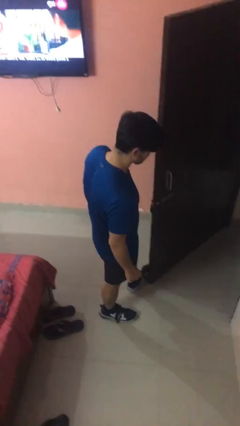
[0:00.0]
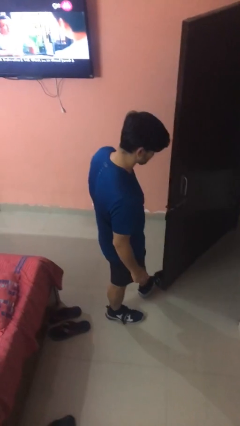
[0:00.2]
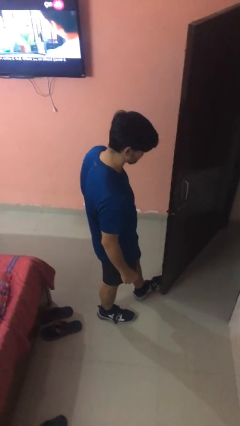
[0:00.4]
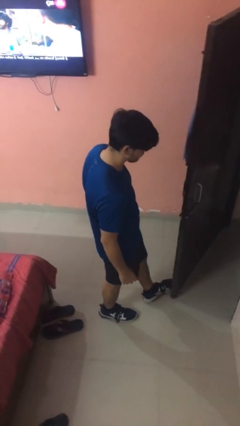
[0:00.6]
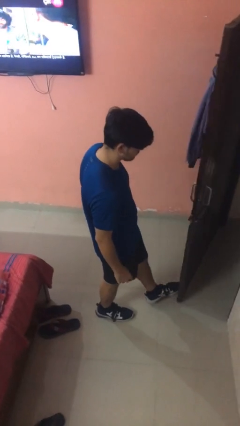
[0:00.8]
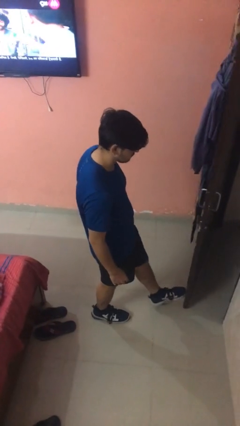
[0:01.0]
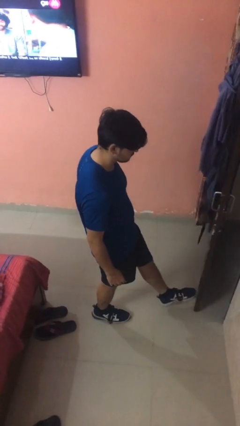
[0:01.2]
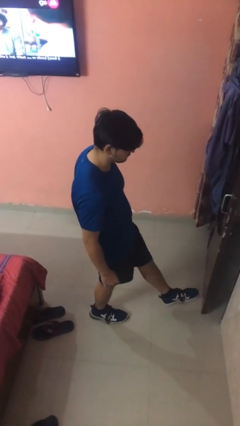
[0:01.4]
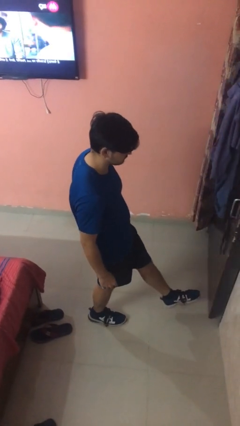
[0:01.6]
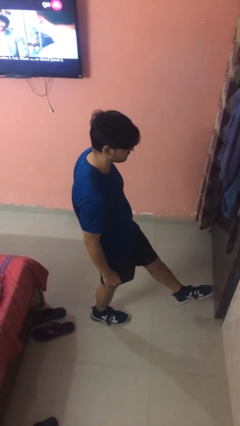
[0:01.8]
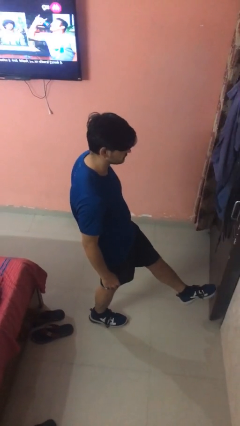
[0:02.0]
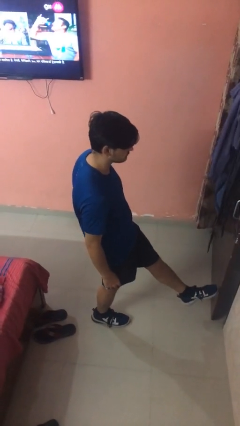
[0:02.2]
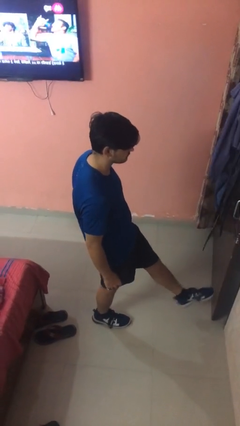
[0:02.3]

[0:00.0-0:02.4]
person closes door with foot

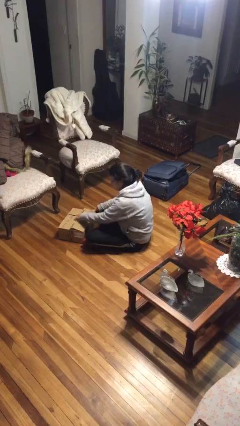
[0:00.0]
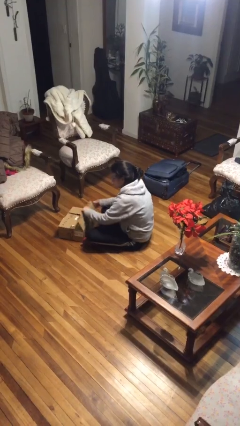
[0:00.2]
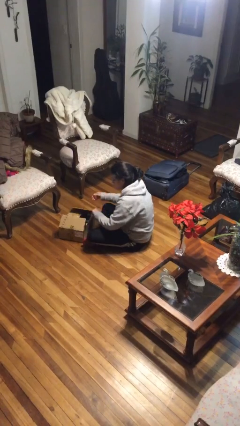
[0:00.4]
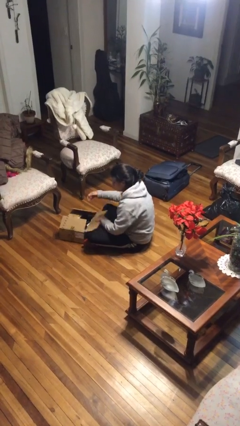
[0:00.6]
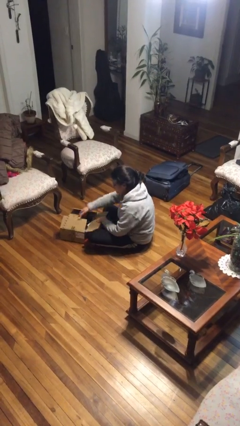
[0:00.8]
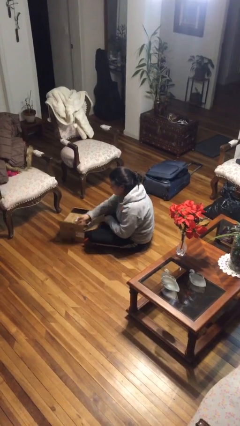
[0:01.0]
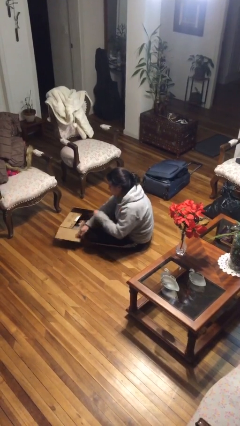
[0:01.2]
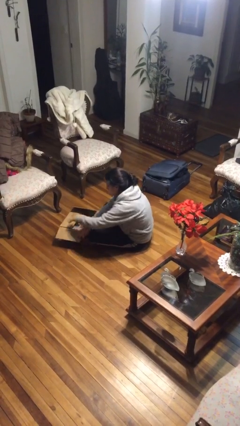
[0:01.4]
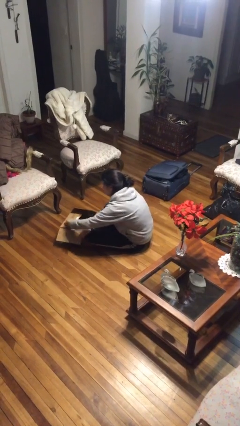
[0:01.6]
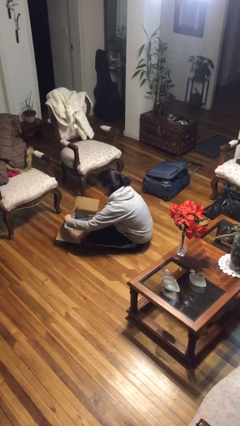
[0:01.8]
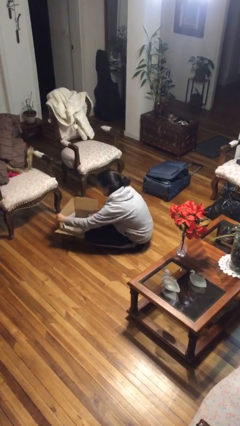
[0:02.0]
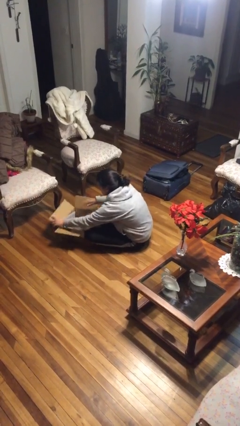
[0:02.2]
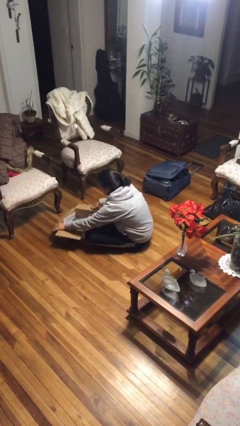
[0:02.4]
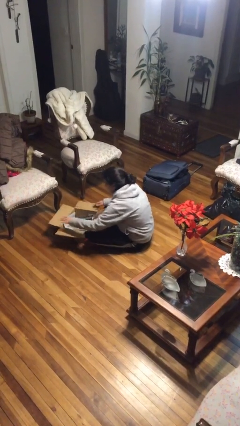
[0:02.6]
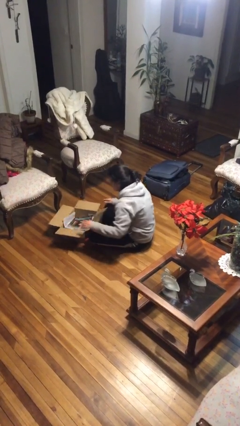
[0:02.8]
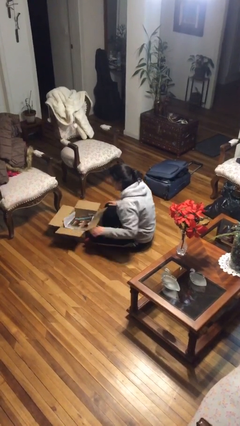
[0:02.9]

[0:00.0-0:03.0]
person opens box

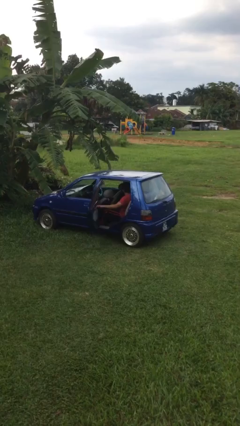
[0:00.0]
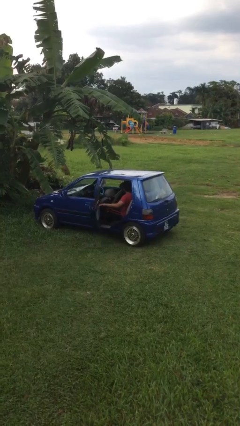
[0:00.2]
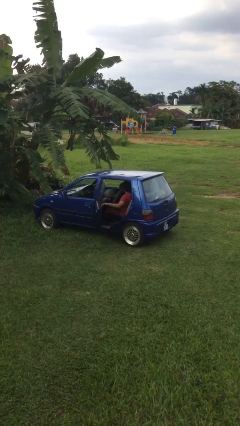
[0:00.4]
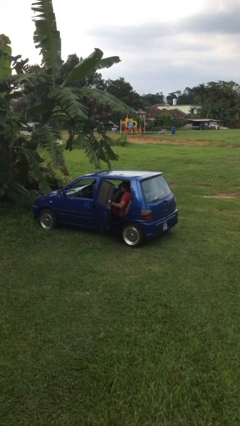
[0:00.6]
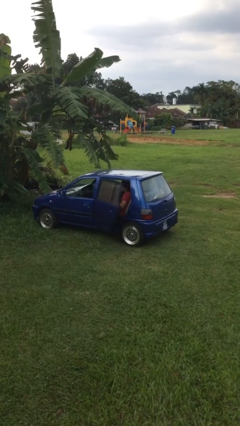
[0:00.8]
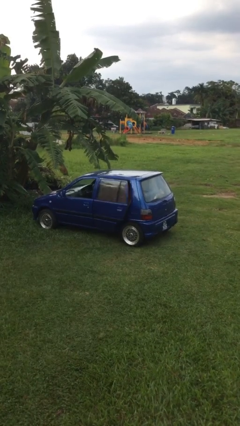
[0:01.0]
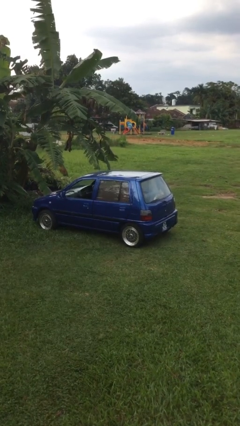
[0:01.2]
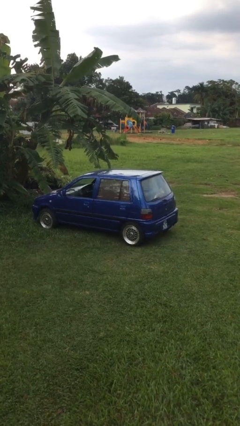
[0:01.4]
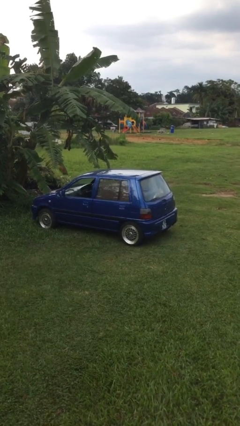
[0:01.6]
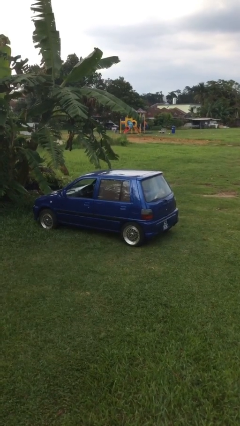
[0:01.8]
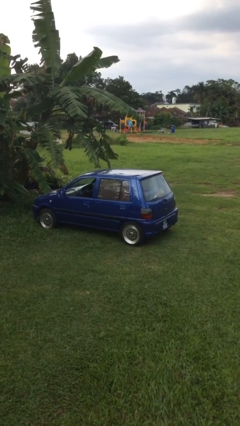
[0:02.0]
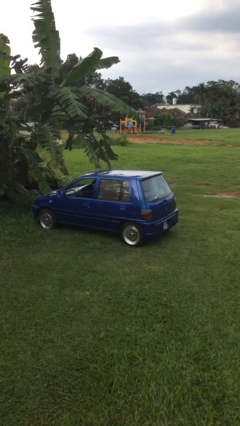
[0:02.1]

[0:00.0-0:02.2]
person closes car door

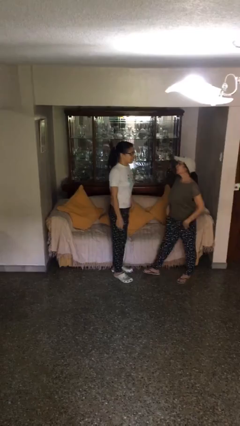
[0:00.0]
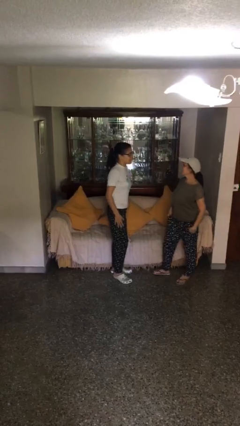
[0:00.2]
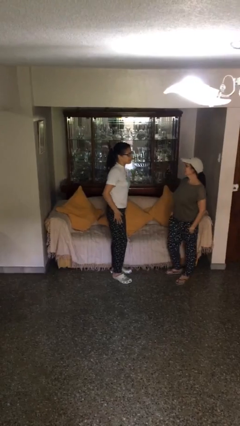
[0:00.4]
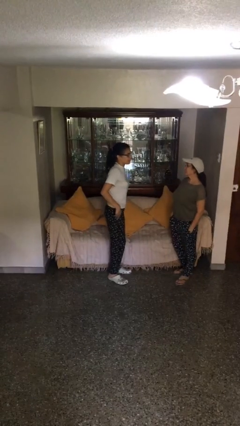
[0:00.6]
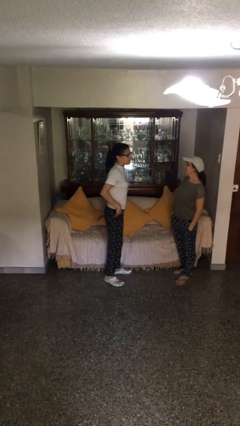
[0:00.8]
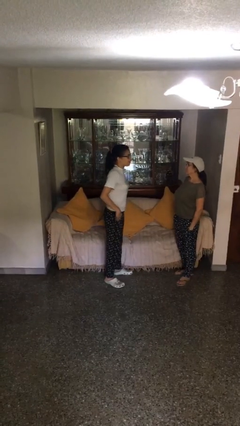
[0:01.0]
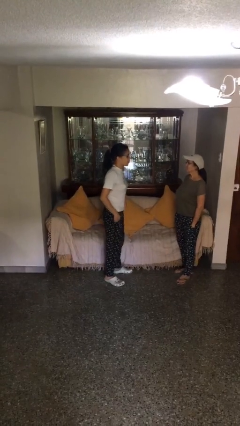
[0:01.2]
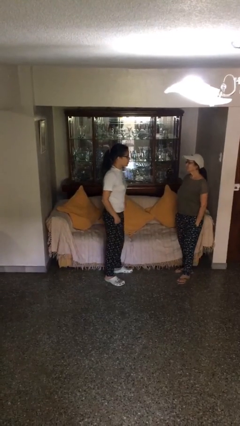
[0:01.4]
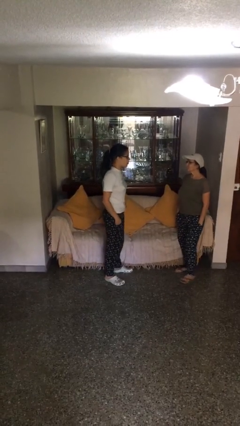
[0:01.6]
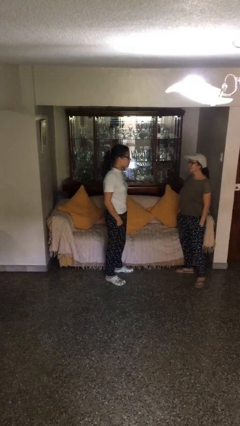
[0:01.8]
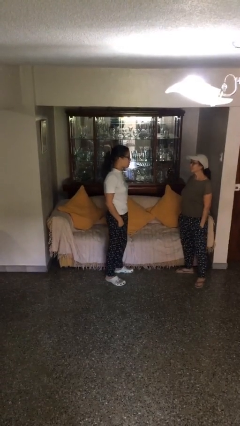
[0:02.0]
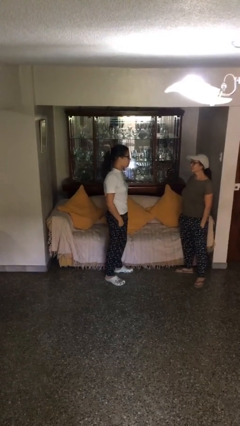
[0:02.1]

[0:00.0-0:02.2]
person talks to person

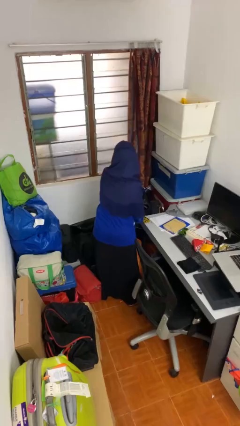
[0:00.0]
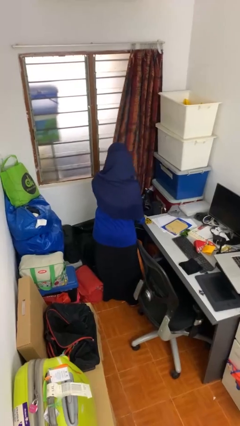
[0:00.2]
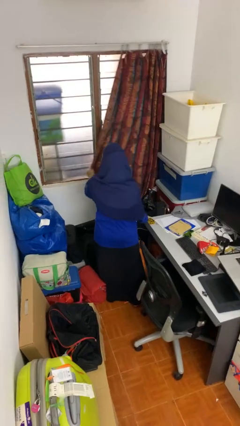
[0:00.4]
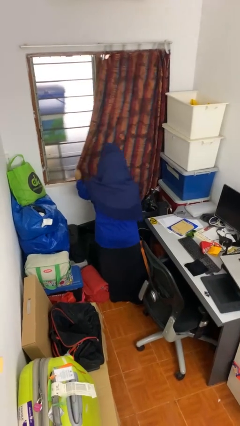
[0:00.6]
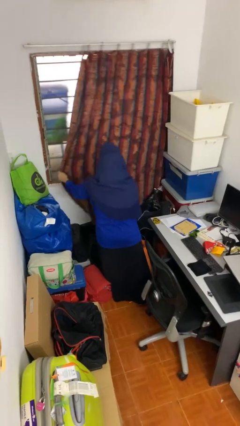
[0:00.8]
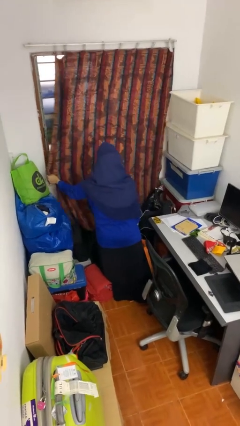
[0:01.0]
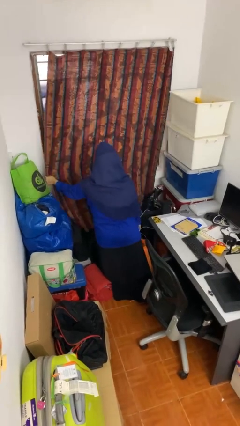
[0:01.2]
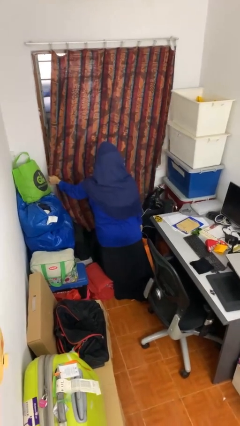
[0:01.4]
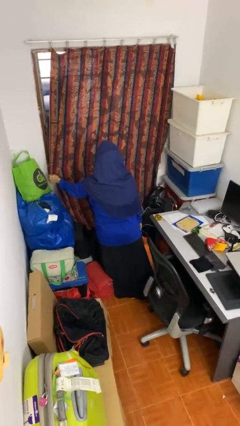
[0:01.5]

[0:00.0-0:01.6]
person closes curtains

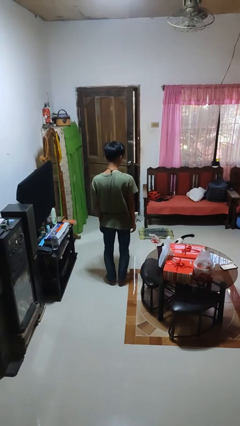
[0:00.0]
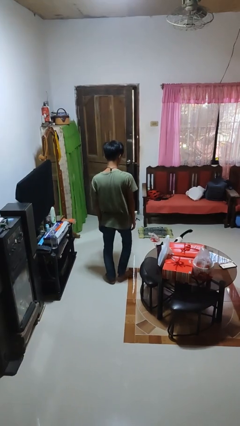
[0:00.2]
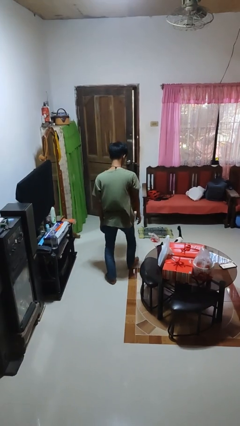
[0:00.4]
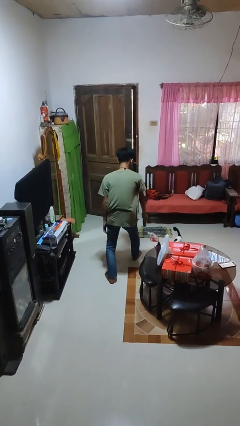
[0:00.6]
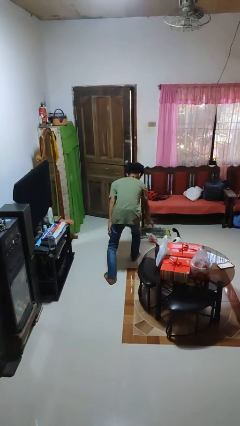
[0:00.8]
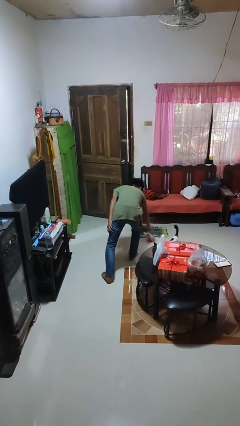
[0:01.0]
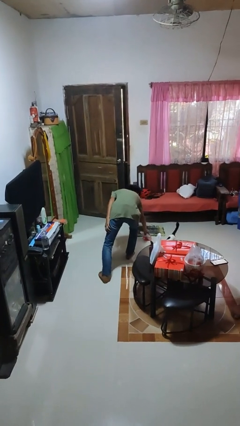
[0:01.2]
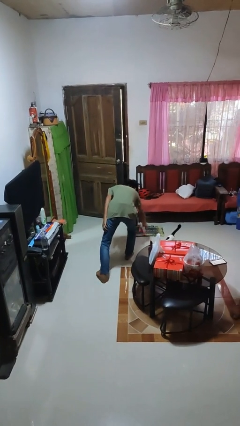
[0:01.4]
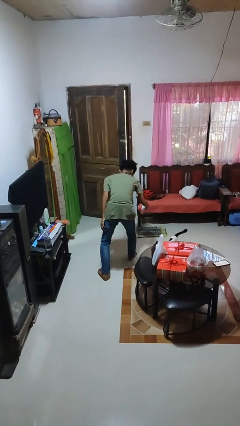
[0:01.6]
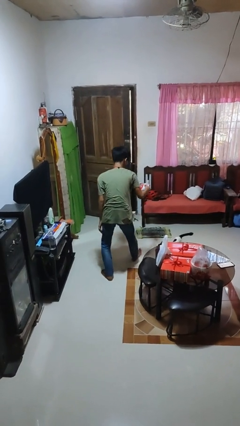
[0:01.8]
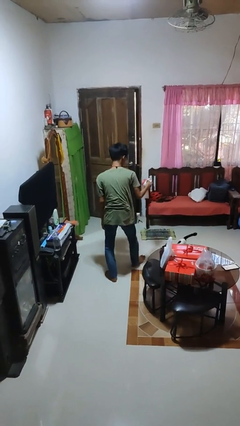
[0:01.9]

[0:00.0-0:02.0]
person picks up object from floor

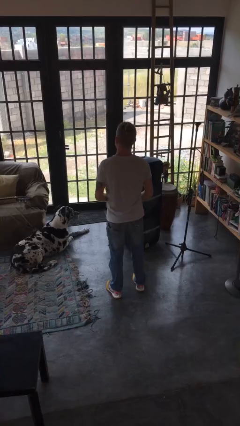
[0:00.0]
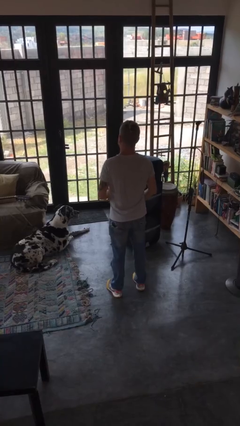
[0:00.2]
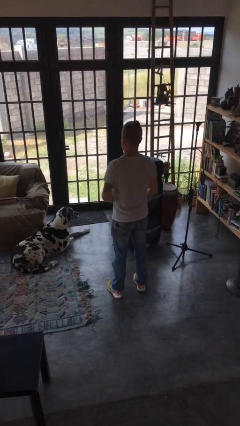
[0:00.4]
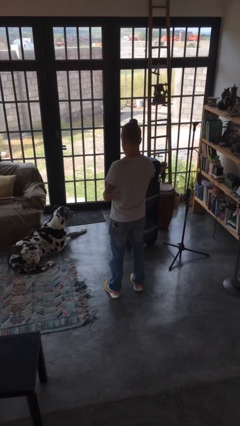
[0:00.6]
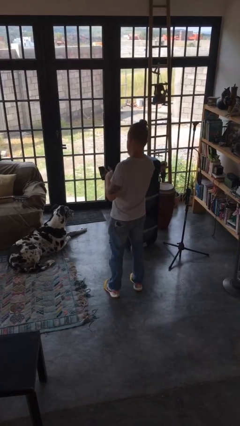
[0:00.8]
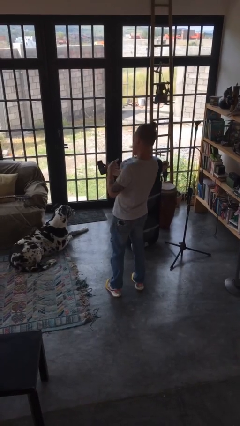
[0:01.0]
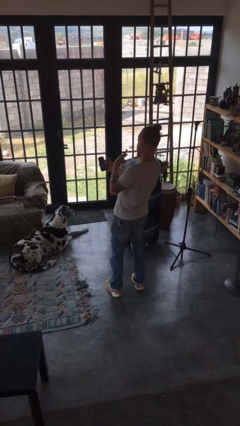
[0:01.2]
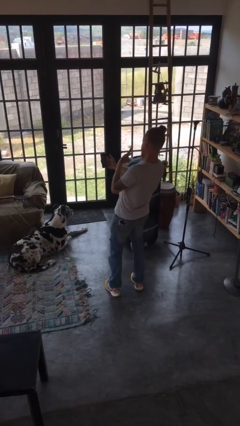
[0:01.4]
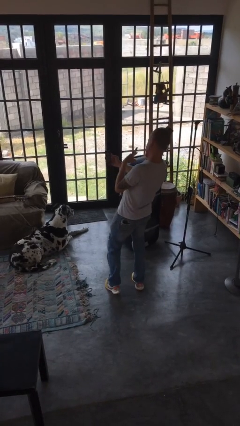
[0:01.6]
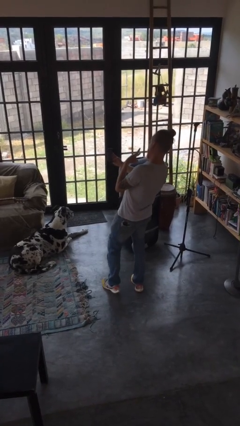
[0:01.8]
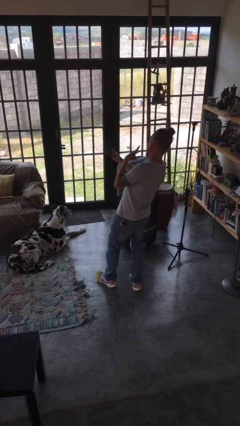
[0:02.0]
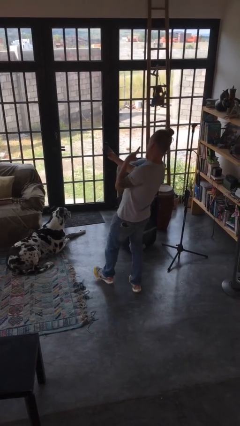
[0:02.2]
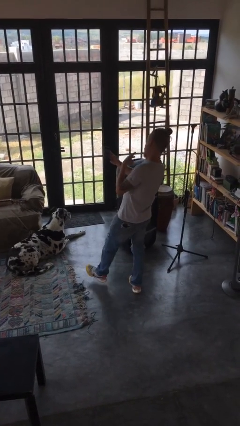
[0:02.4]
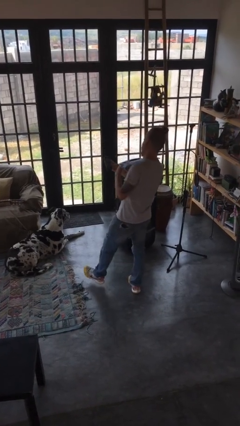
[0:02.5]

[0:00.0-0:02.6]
person takes selfie

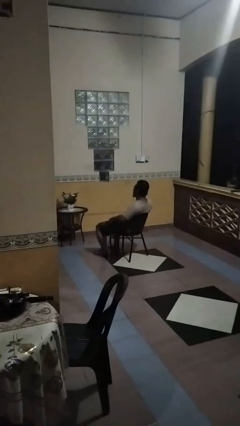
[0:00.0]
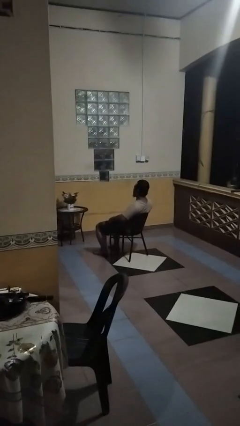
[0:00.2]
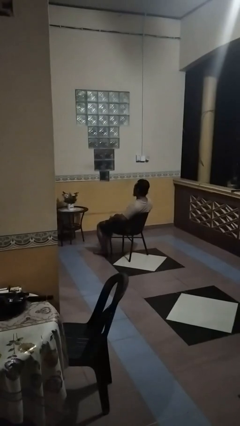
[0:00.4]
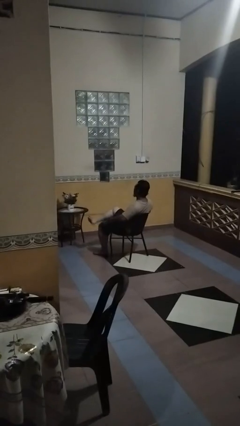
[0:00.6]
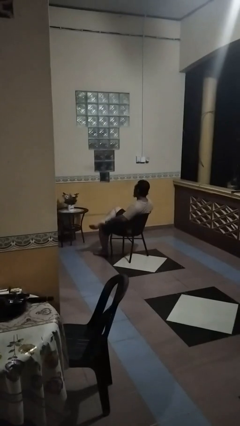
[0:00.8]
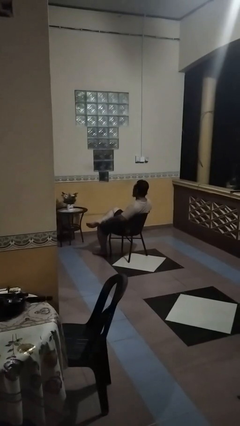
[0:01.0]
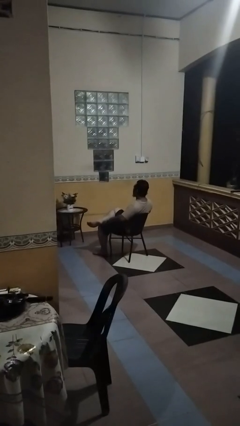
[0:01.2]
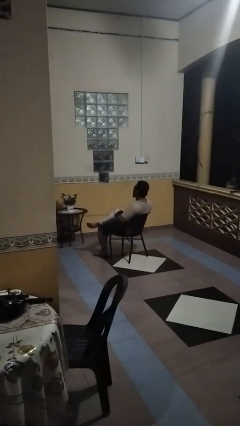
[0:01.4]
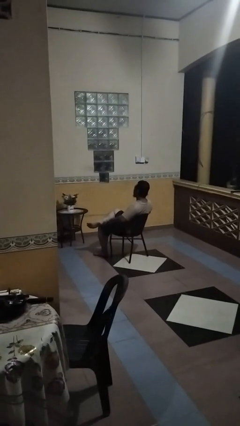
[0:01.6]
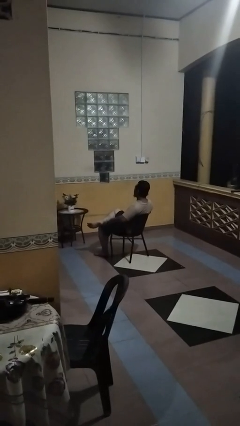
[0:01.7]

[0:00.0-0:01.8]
person crosses legs
